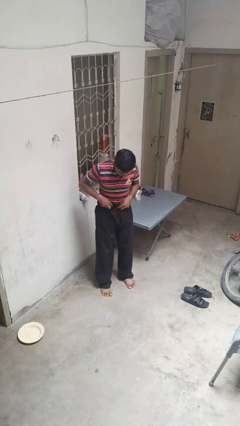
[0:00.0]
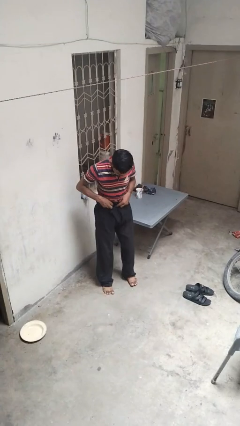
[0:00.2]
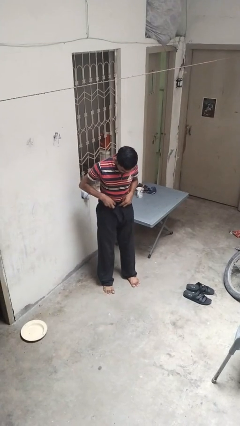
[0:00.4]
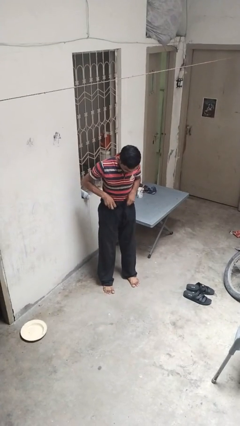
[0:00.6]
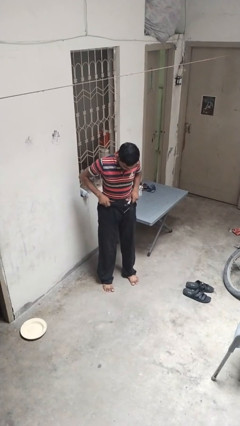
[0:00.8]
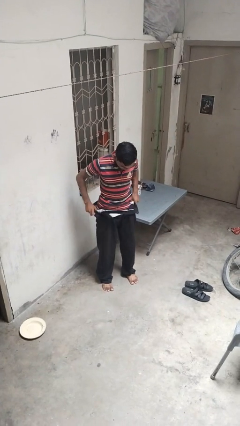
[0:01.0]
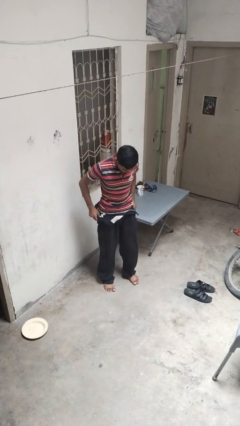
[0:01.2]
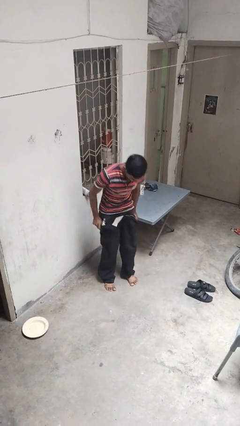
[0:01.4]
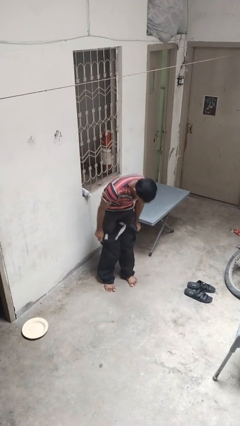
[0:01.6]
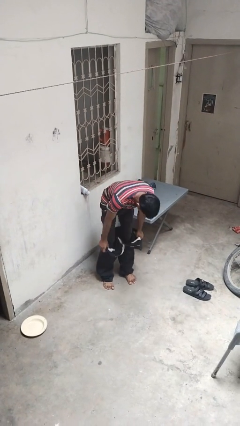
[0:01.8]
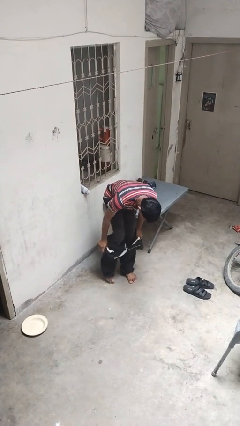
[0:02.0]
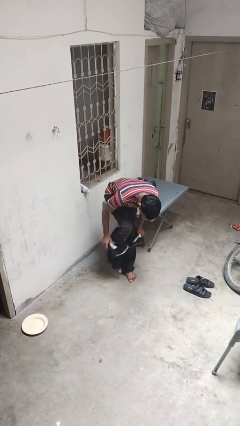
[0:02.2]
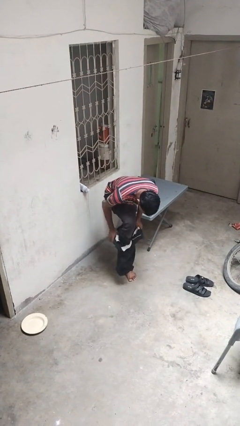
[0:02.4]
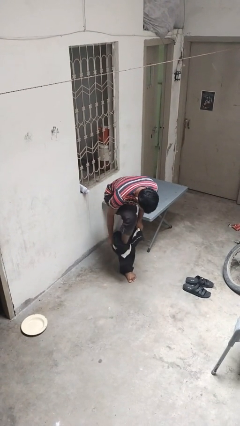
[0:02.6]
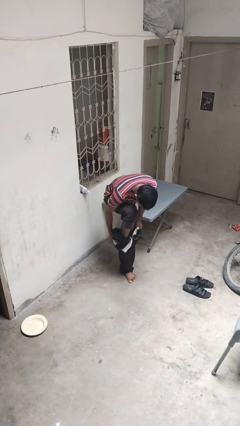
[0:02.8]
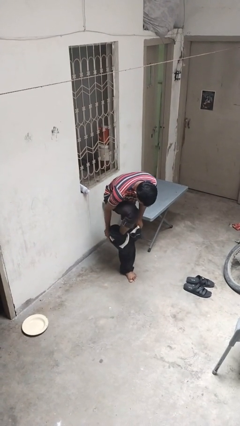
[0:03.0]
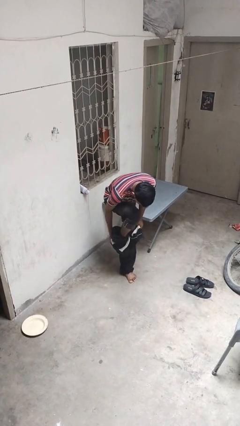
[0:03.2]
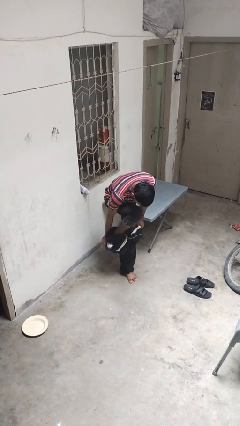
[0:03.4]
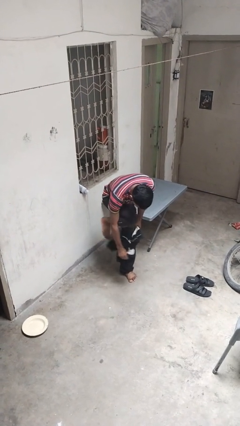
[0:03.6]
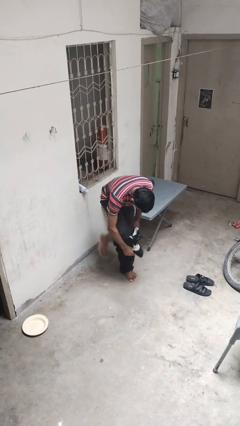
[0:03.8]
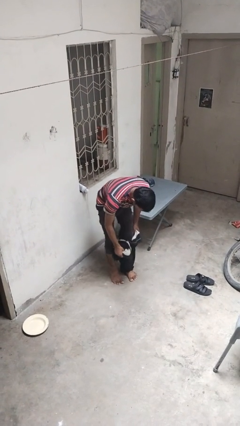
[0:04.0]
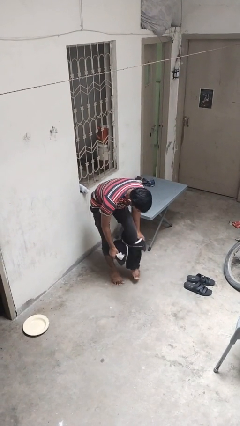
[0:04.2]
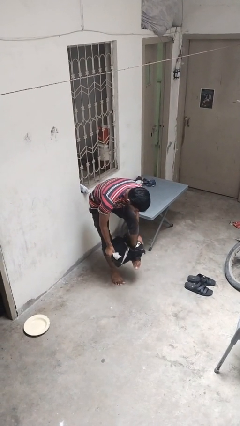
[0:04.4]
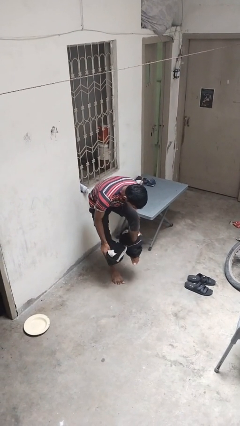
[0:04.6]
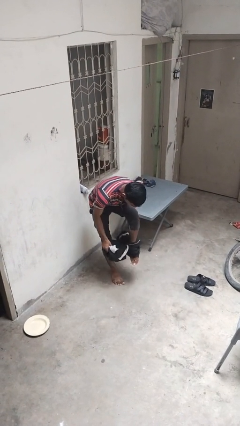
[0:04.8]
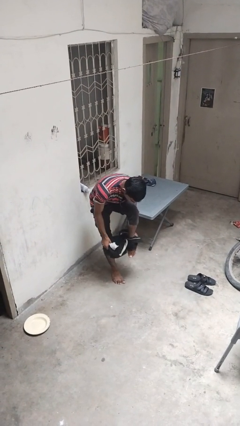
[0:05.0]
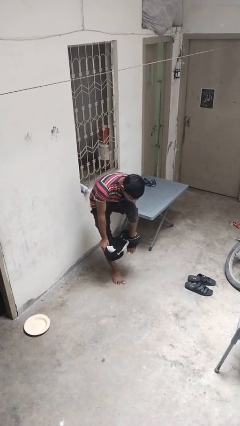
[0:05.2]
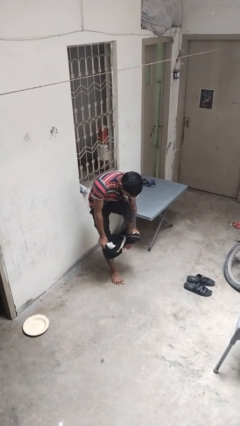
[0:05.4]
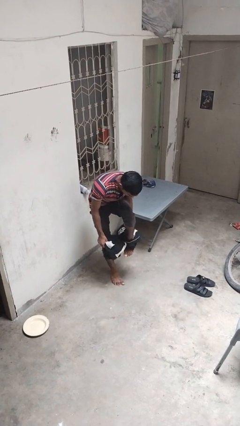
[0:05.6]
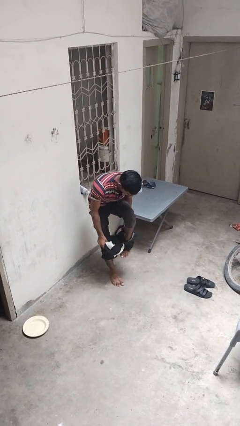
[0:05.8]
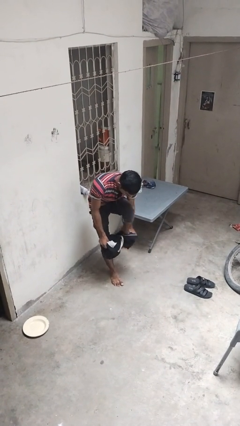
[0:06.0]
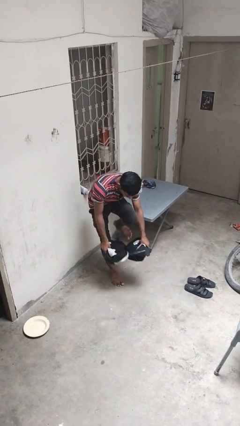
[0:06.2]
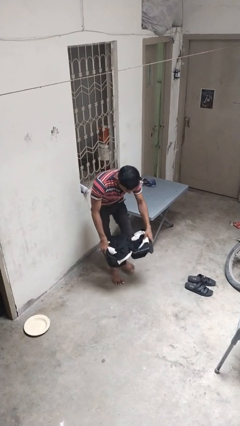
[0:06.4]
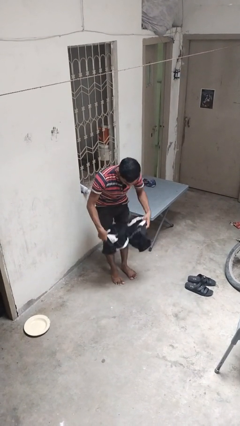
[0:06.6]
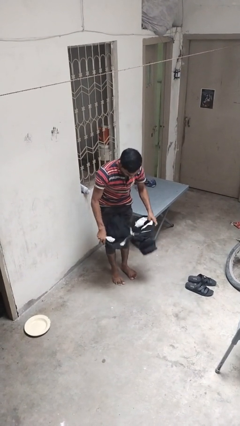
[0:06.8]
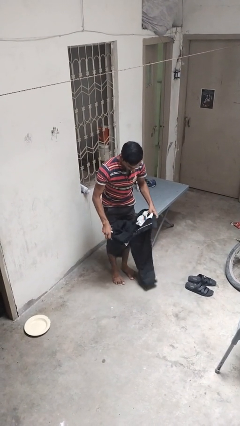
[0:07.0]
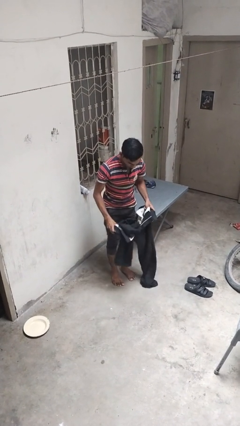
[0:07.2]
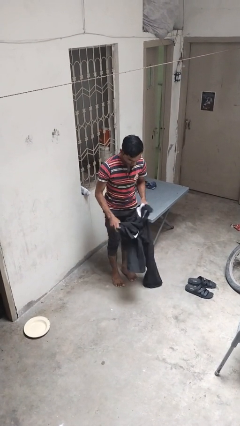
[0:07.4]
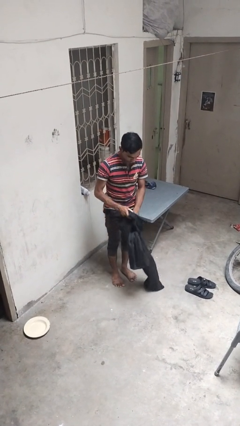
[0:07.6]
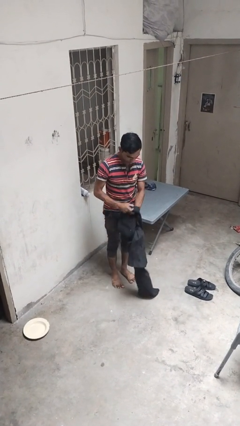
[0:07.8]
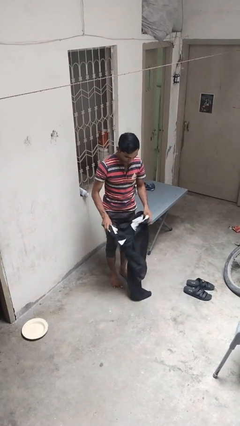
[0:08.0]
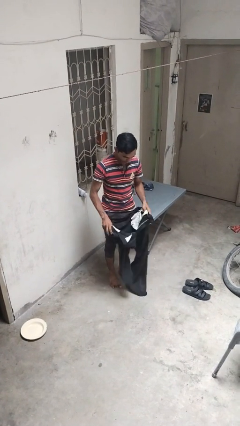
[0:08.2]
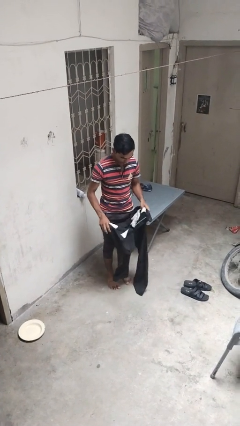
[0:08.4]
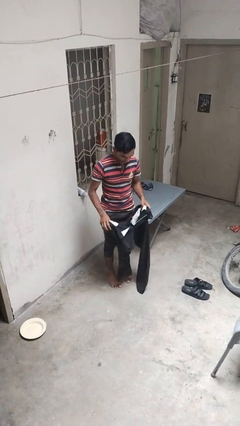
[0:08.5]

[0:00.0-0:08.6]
person takes off pants

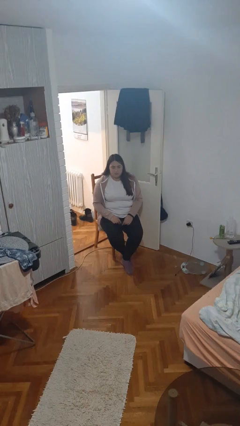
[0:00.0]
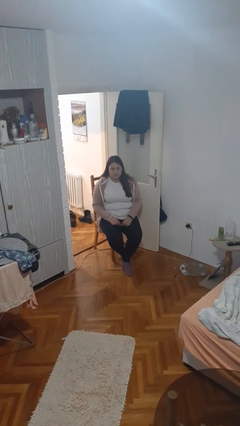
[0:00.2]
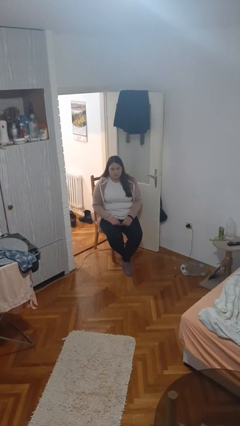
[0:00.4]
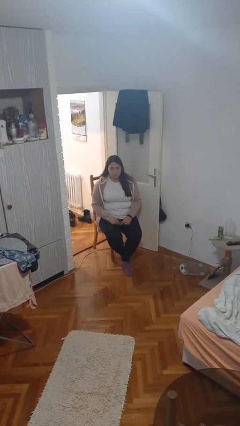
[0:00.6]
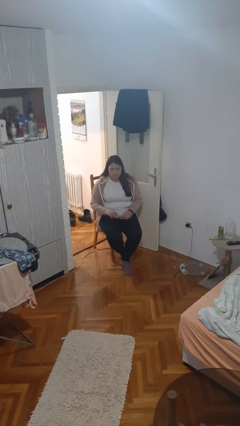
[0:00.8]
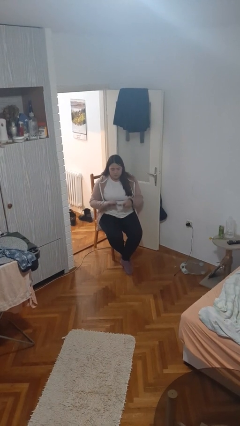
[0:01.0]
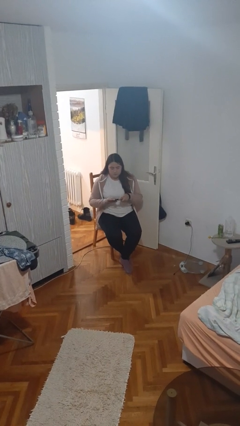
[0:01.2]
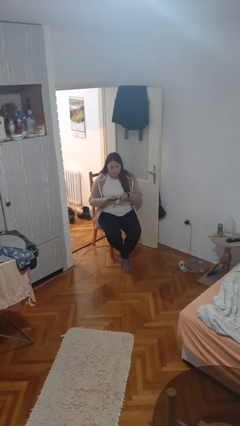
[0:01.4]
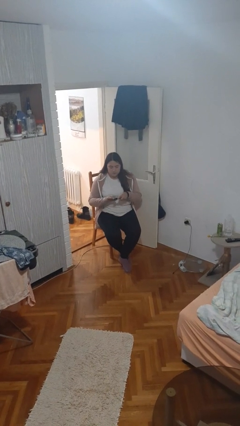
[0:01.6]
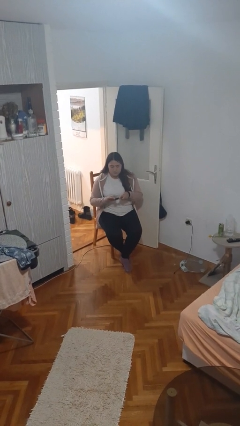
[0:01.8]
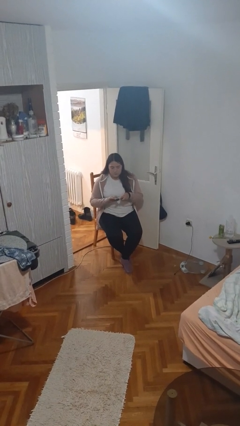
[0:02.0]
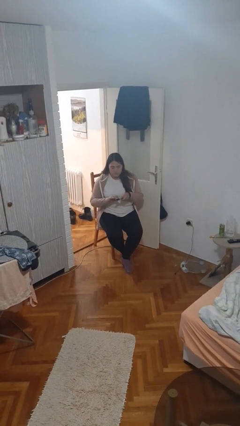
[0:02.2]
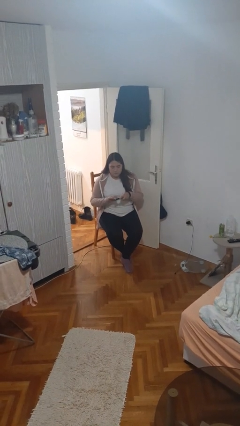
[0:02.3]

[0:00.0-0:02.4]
person files fingernails

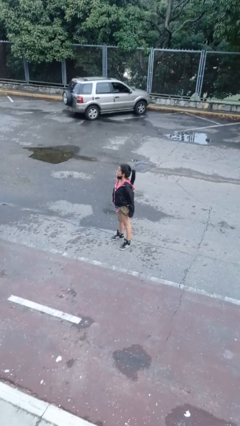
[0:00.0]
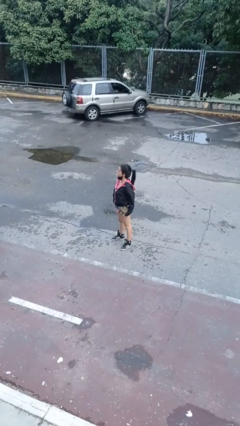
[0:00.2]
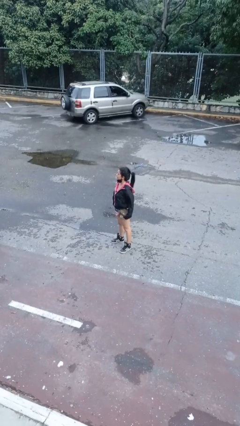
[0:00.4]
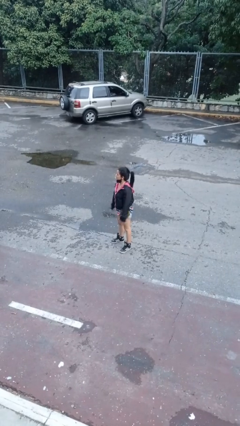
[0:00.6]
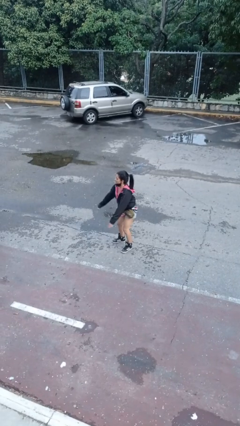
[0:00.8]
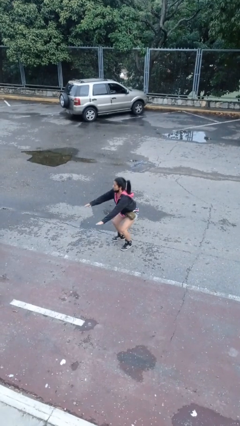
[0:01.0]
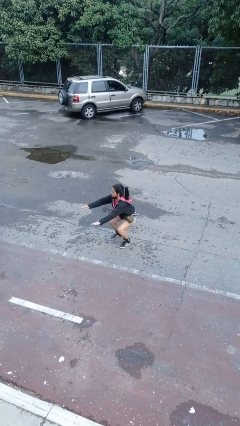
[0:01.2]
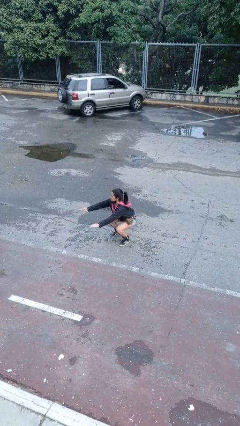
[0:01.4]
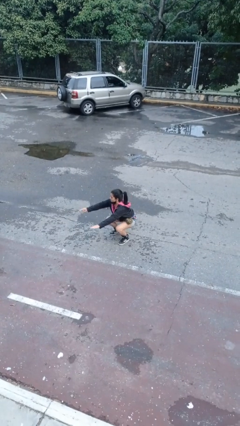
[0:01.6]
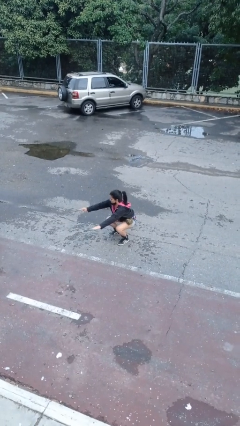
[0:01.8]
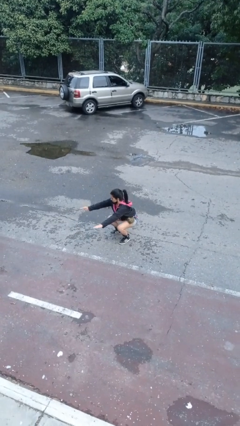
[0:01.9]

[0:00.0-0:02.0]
person squats

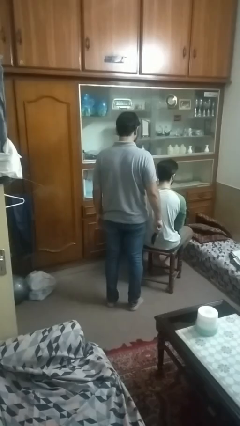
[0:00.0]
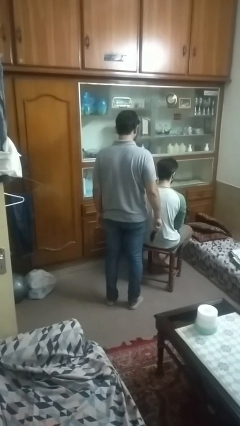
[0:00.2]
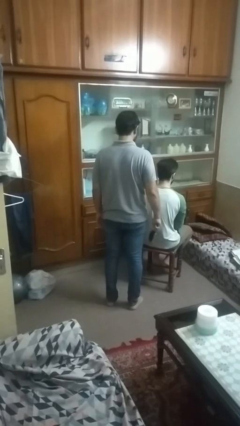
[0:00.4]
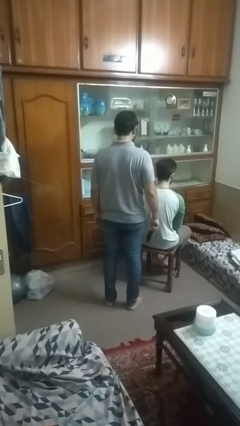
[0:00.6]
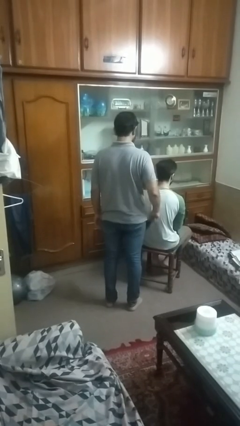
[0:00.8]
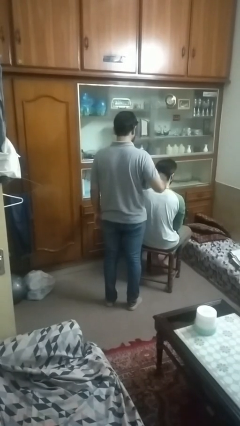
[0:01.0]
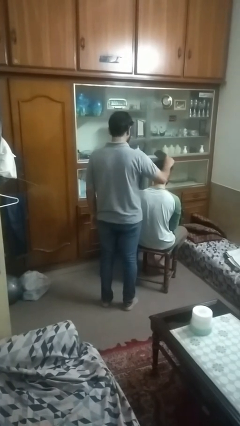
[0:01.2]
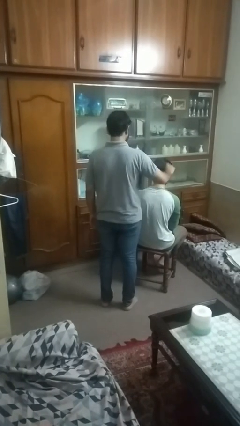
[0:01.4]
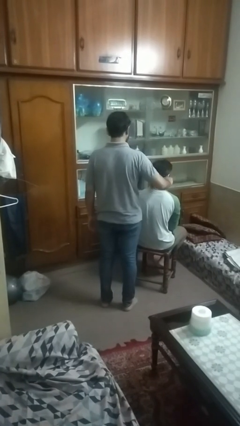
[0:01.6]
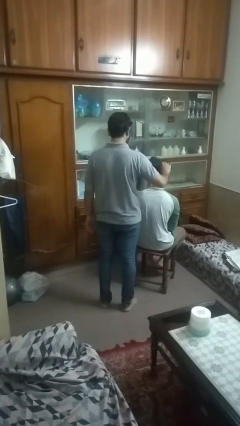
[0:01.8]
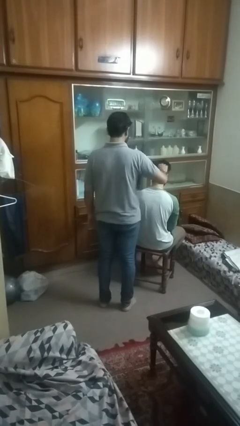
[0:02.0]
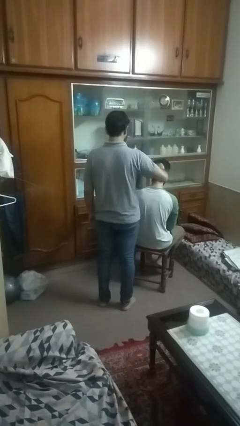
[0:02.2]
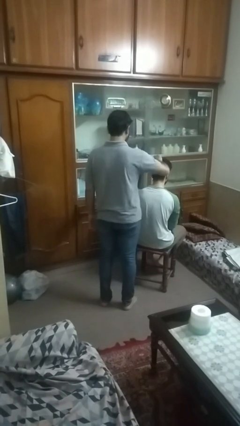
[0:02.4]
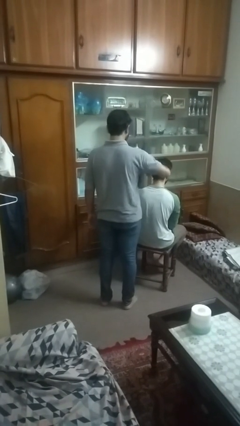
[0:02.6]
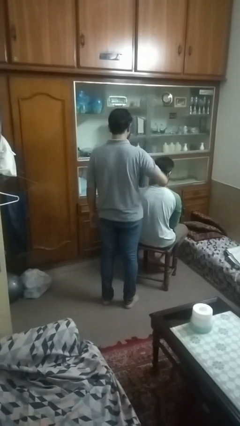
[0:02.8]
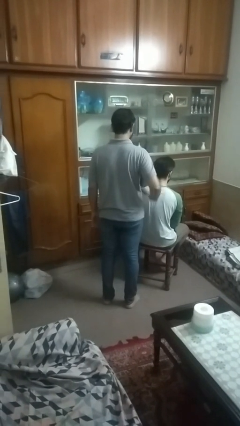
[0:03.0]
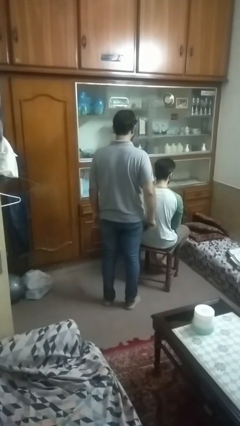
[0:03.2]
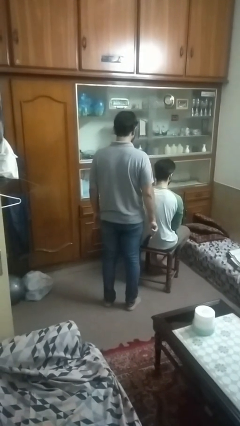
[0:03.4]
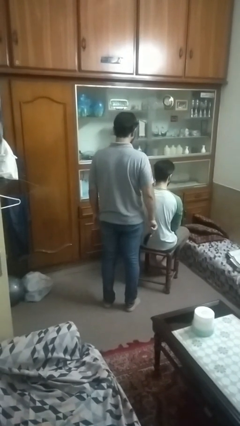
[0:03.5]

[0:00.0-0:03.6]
person brushes hair of person

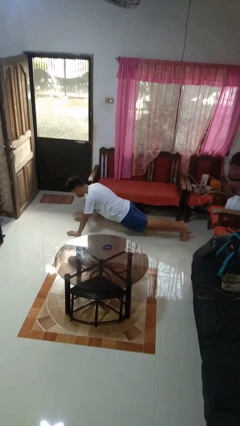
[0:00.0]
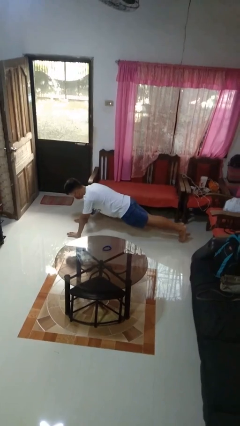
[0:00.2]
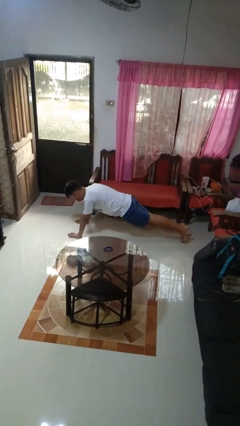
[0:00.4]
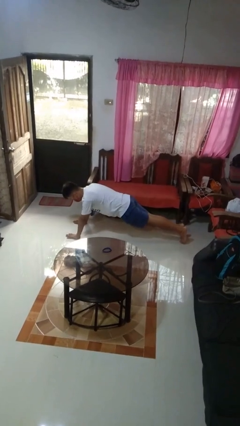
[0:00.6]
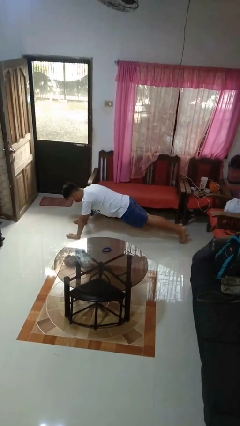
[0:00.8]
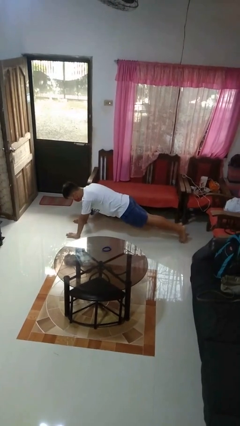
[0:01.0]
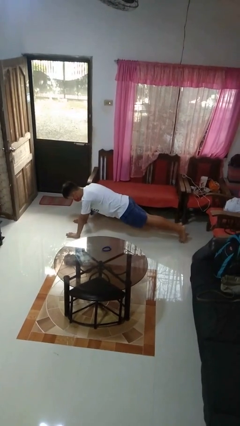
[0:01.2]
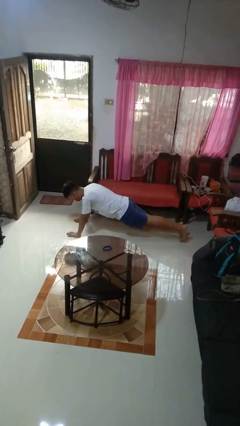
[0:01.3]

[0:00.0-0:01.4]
person exercises with pushup
